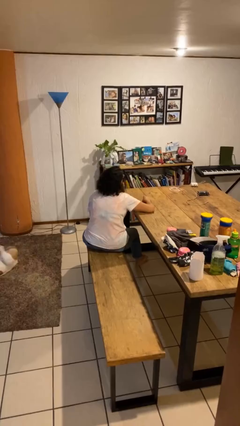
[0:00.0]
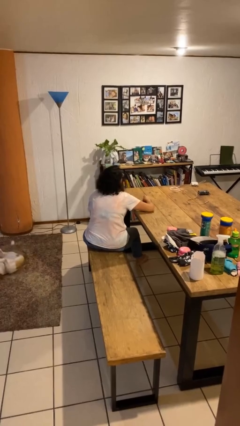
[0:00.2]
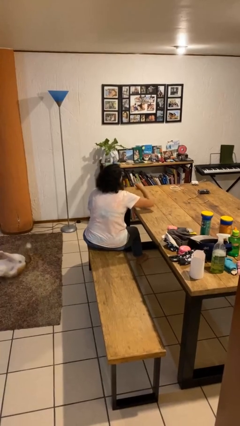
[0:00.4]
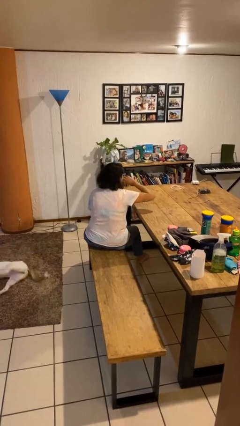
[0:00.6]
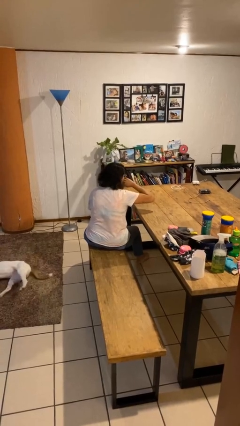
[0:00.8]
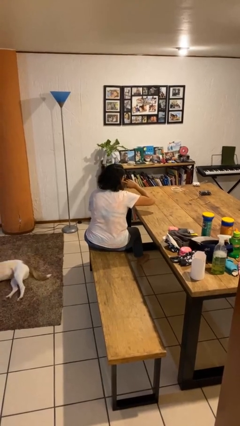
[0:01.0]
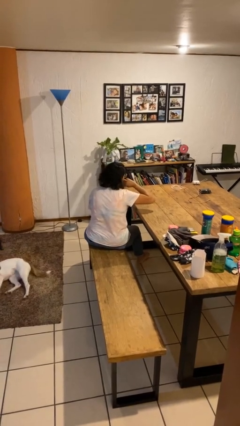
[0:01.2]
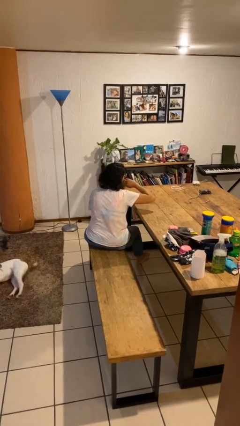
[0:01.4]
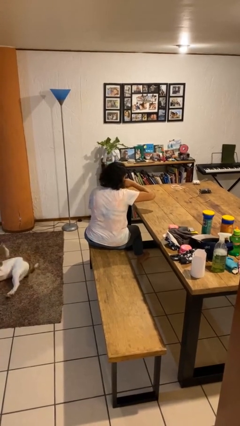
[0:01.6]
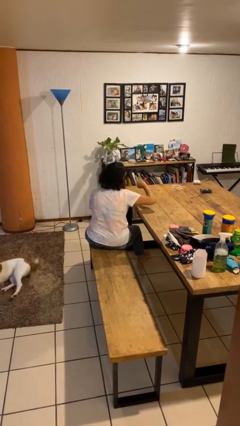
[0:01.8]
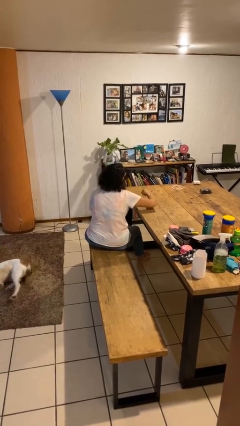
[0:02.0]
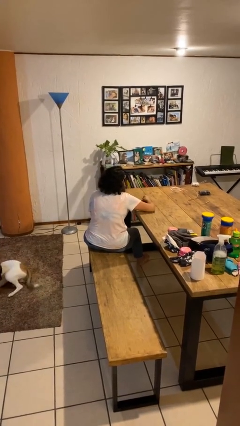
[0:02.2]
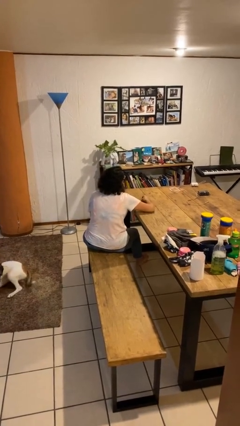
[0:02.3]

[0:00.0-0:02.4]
person licks fingers

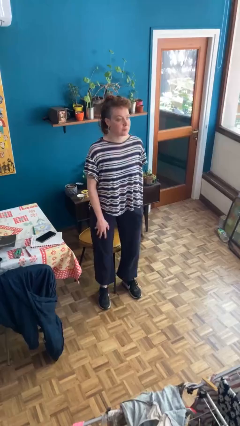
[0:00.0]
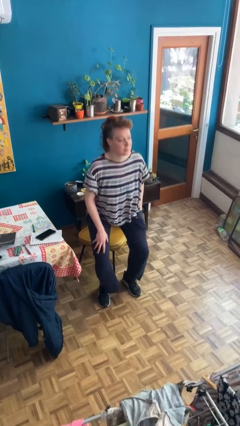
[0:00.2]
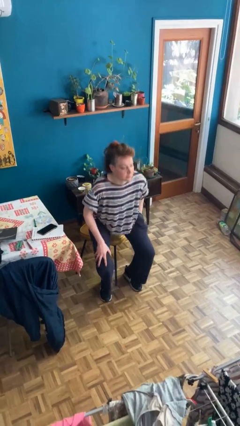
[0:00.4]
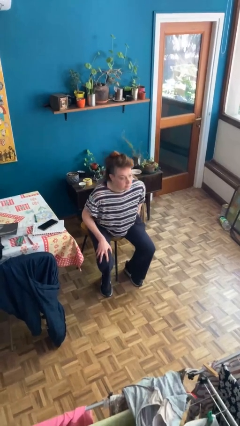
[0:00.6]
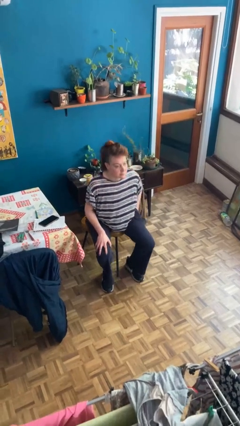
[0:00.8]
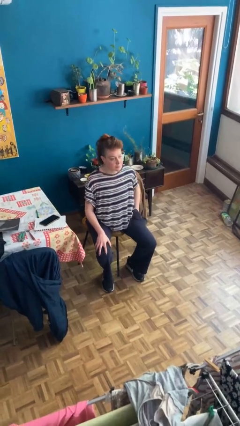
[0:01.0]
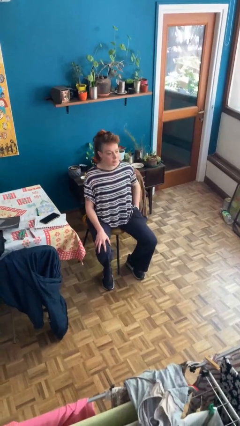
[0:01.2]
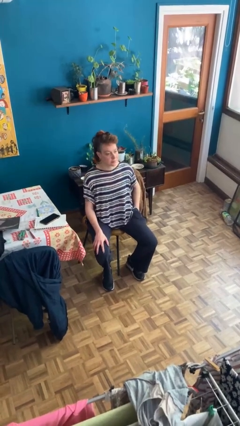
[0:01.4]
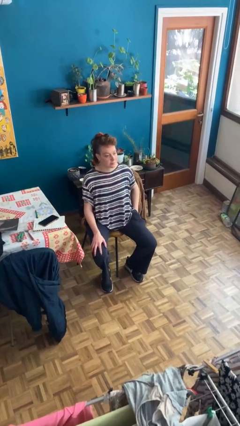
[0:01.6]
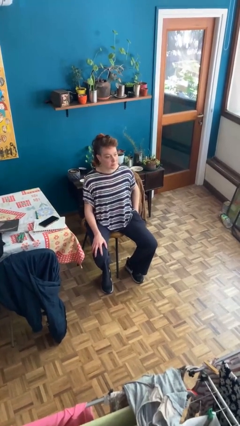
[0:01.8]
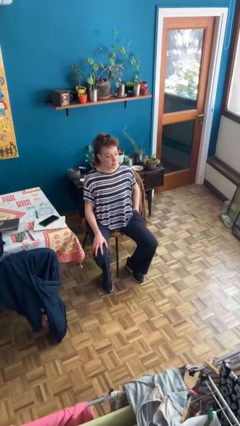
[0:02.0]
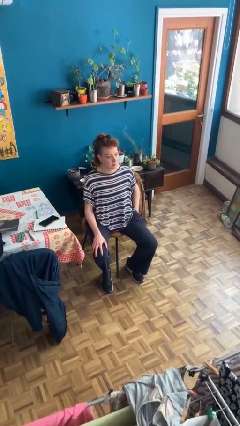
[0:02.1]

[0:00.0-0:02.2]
person sits down

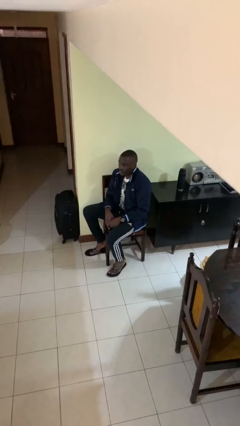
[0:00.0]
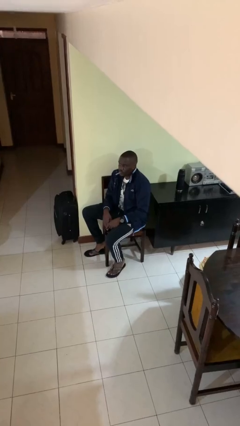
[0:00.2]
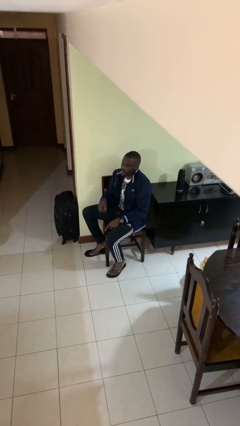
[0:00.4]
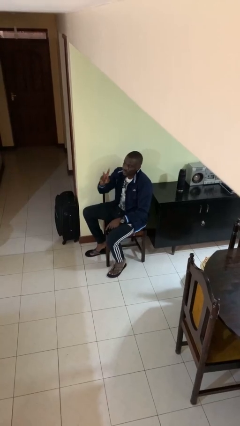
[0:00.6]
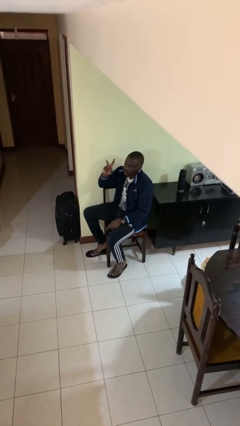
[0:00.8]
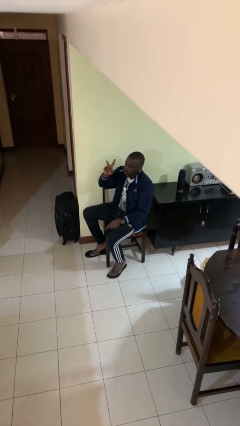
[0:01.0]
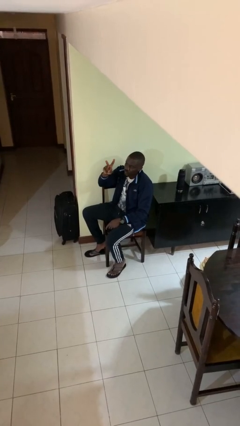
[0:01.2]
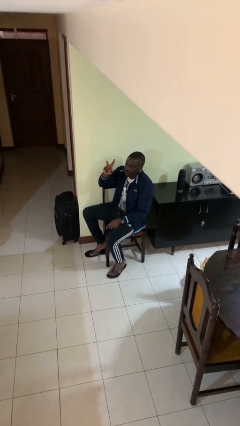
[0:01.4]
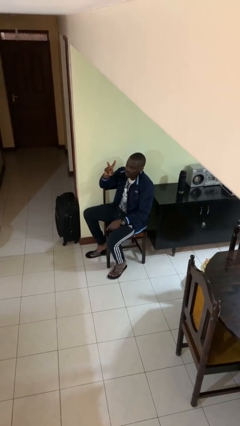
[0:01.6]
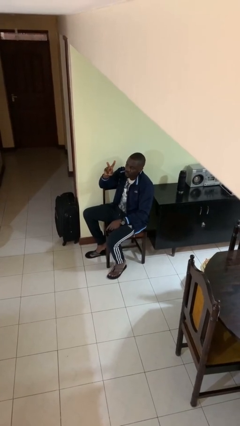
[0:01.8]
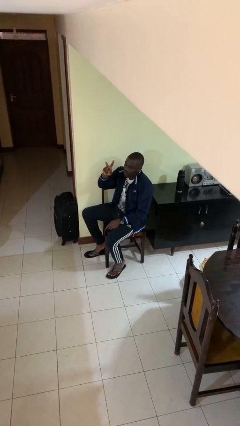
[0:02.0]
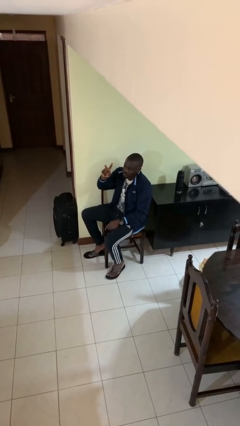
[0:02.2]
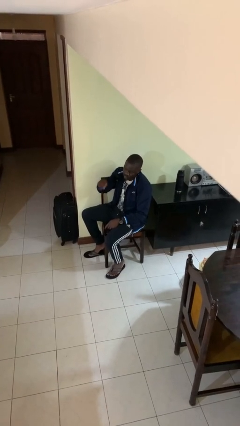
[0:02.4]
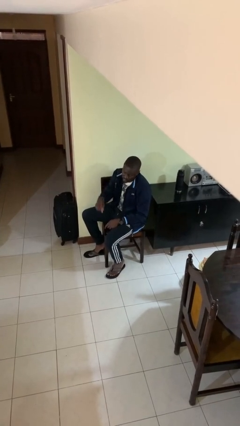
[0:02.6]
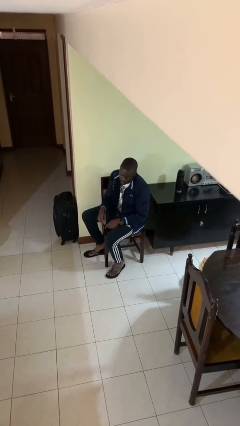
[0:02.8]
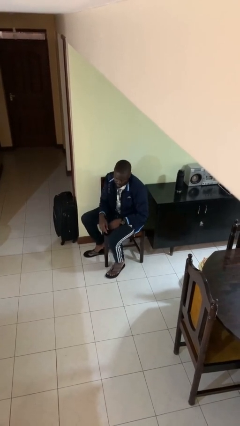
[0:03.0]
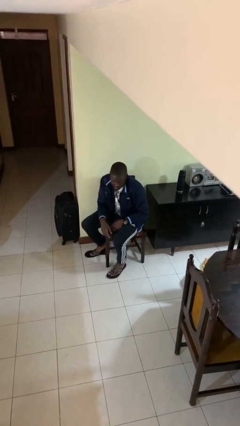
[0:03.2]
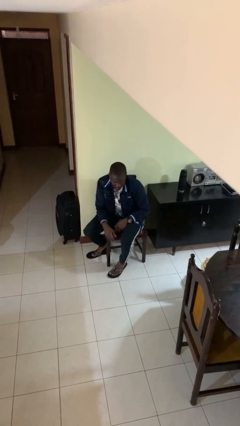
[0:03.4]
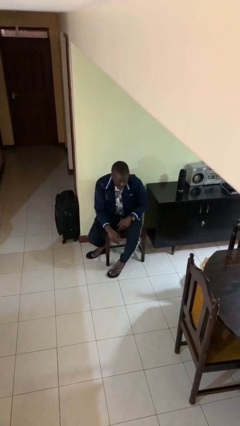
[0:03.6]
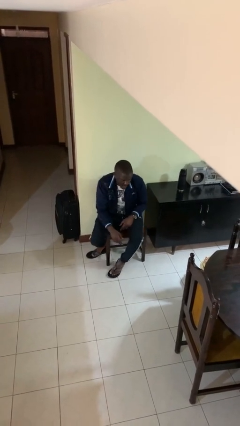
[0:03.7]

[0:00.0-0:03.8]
person gestures peace

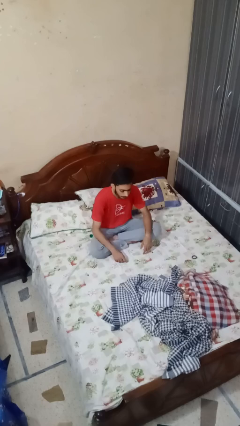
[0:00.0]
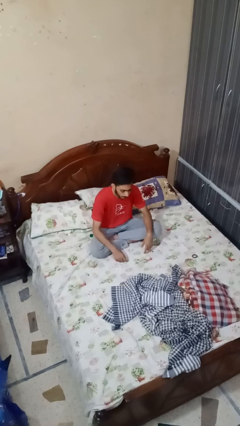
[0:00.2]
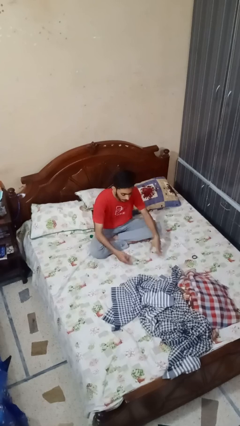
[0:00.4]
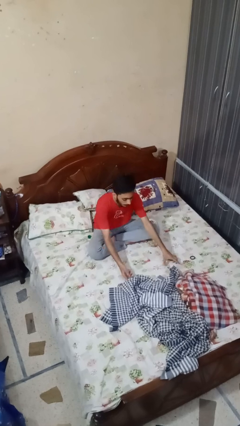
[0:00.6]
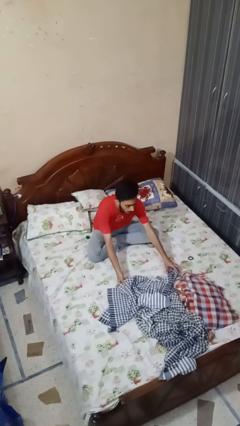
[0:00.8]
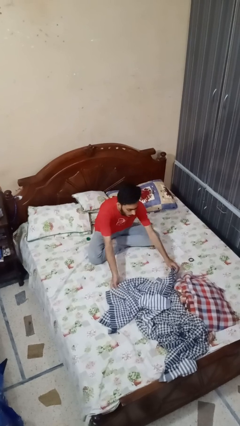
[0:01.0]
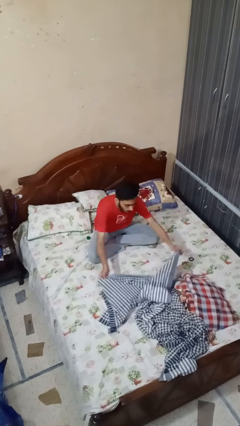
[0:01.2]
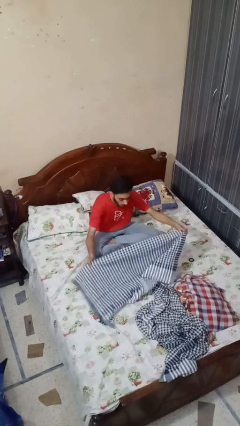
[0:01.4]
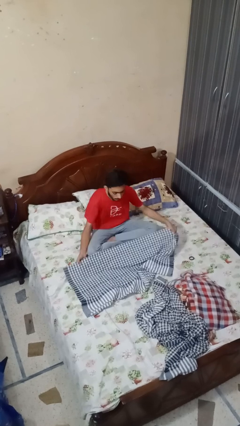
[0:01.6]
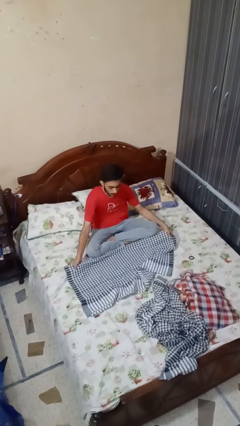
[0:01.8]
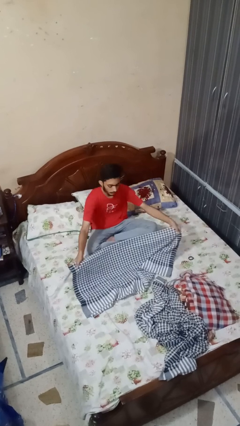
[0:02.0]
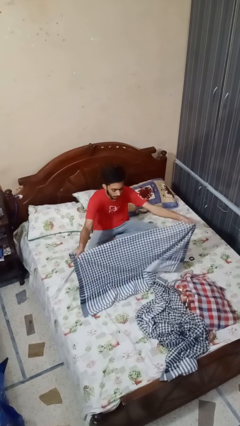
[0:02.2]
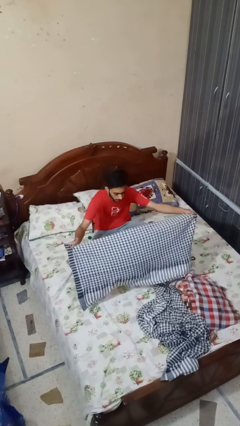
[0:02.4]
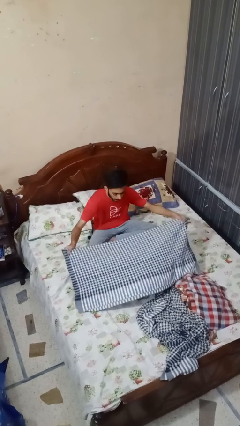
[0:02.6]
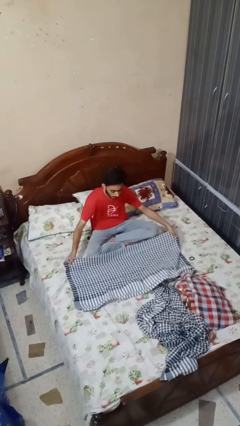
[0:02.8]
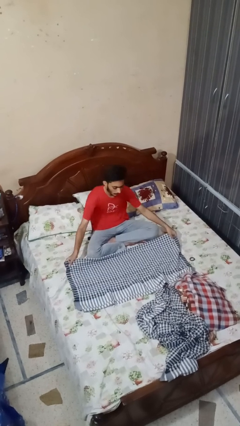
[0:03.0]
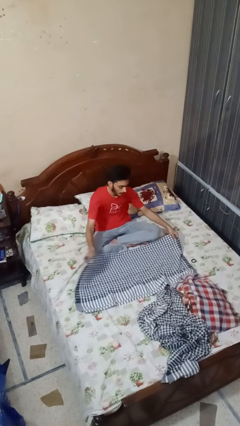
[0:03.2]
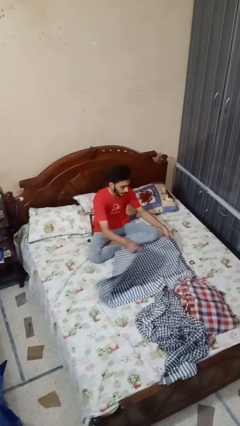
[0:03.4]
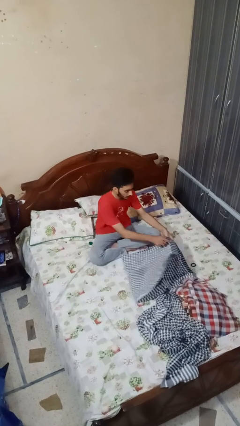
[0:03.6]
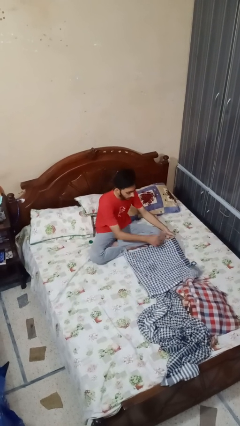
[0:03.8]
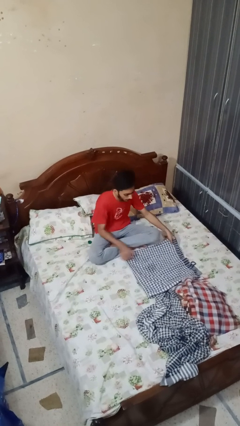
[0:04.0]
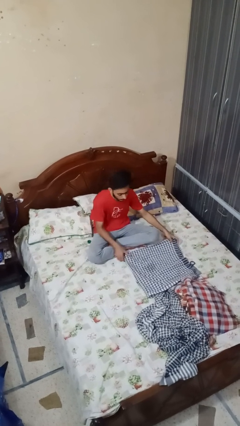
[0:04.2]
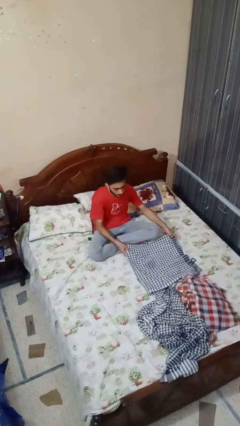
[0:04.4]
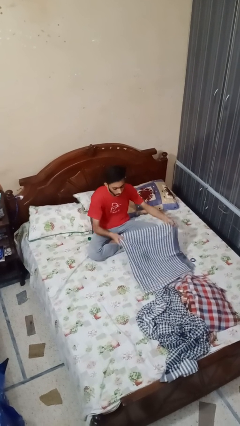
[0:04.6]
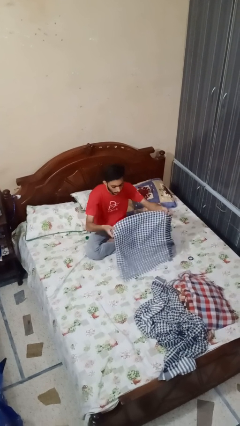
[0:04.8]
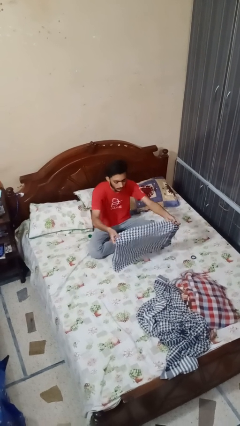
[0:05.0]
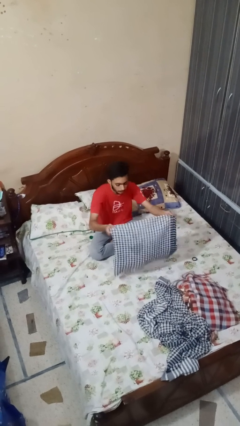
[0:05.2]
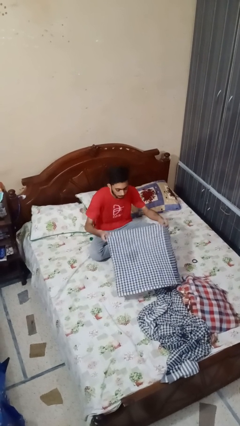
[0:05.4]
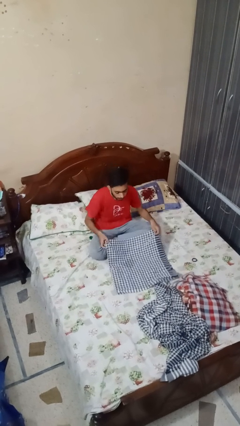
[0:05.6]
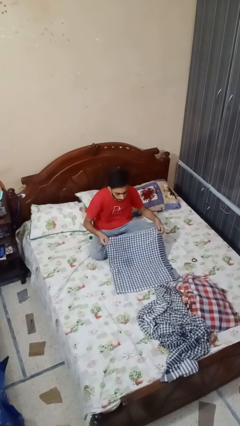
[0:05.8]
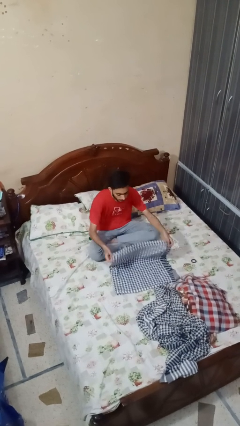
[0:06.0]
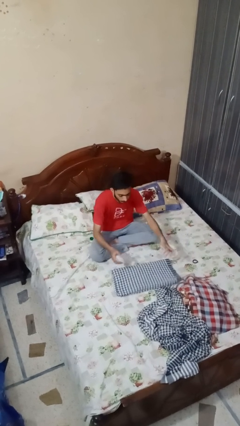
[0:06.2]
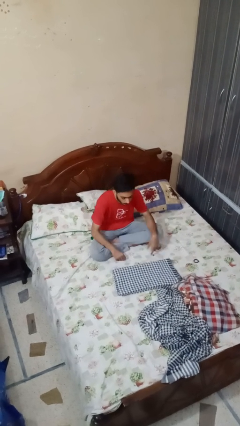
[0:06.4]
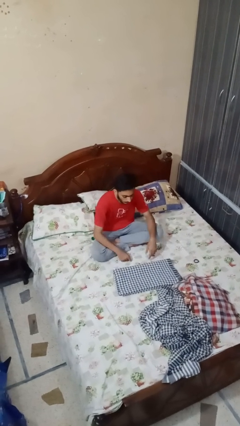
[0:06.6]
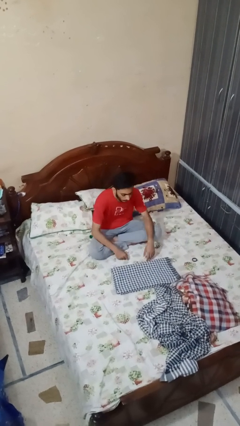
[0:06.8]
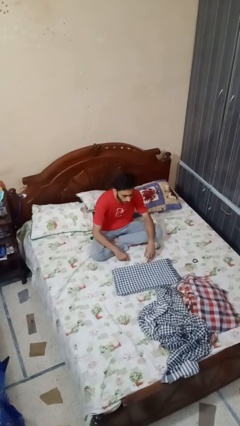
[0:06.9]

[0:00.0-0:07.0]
person folds blanket

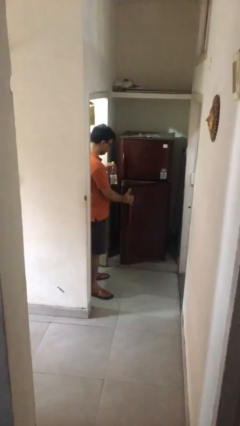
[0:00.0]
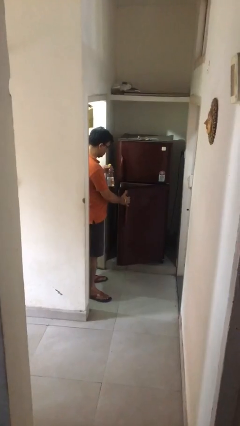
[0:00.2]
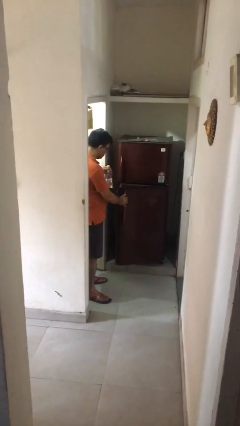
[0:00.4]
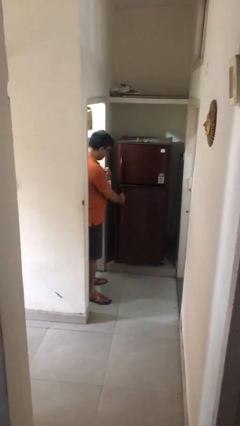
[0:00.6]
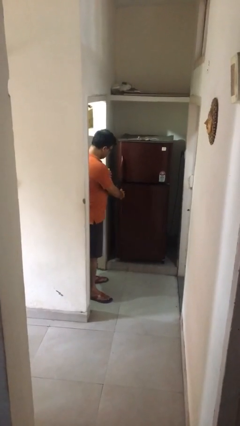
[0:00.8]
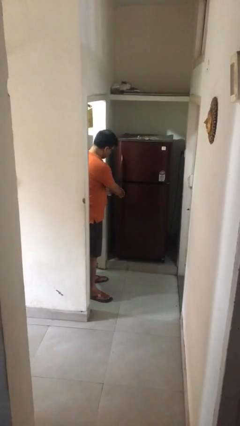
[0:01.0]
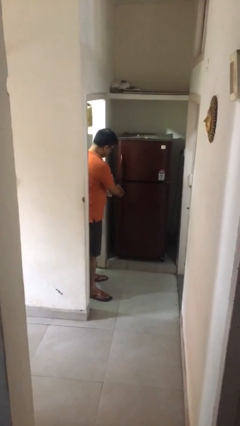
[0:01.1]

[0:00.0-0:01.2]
person closes refrigerator

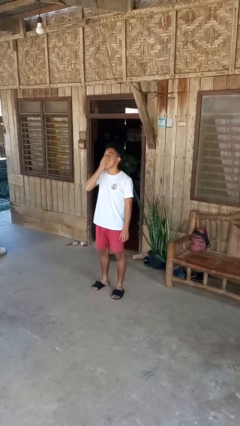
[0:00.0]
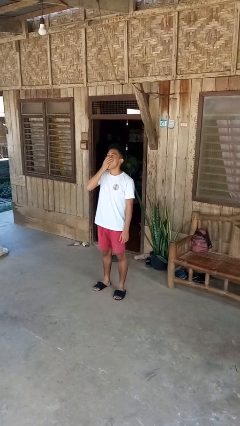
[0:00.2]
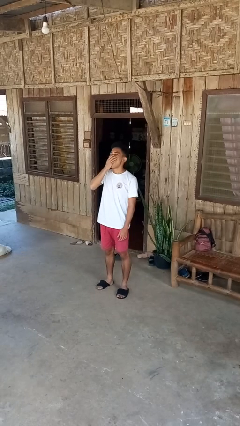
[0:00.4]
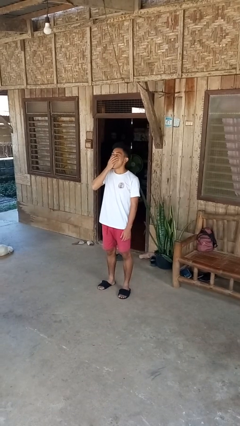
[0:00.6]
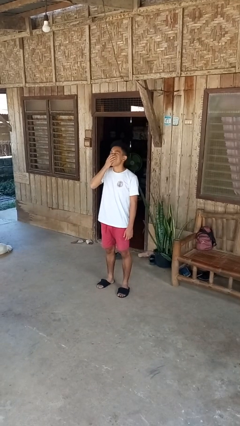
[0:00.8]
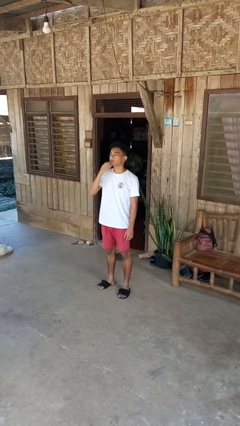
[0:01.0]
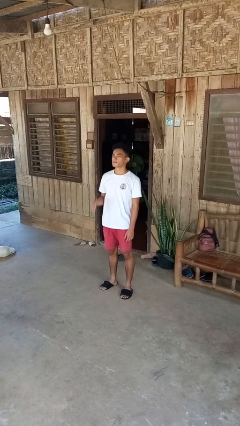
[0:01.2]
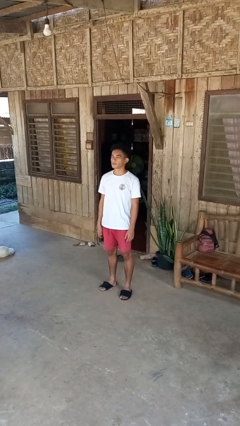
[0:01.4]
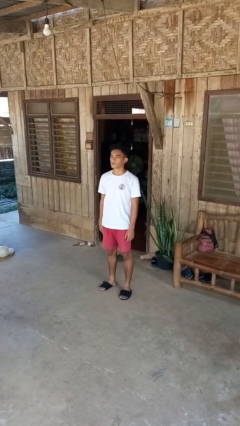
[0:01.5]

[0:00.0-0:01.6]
person yawns
